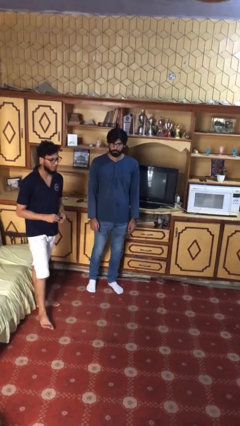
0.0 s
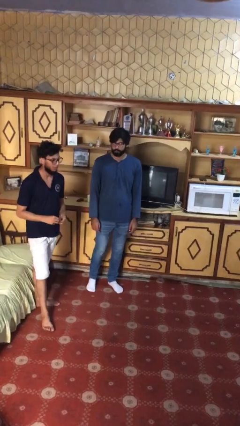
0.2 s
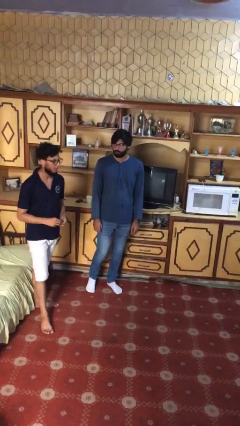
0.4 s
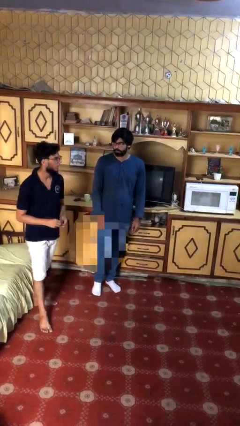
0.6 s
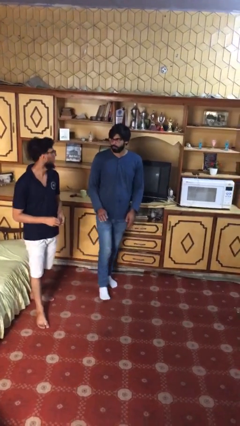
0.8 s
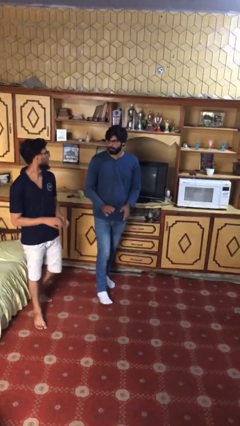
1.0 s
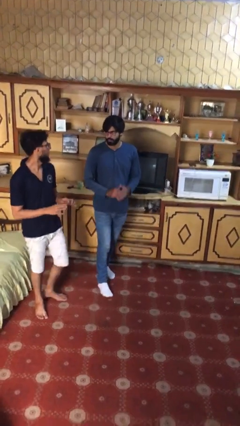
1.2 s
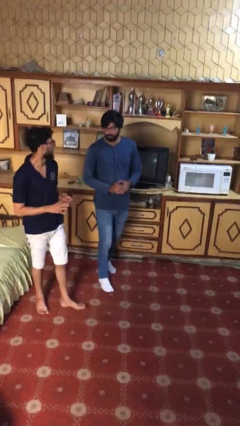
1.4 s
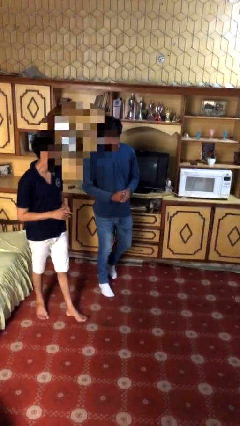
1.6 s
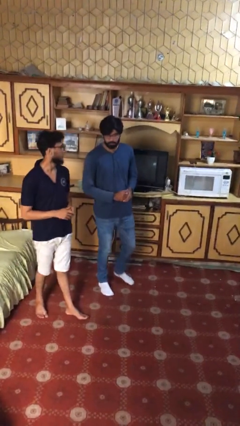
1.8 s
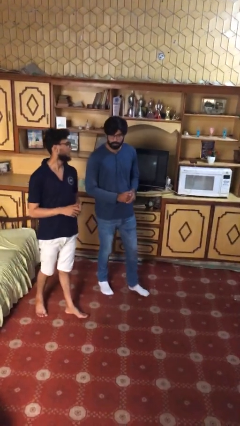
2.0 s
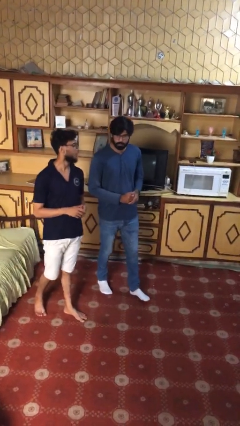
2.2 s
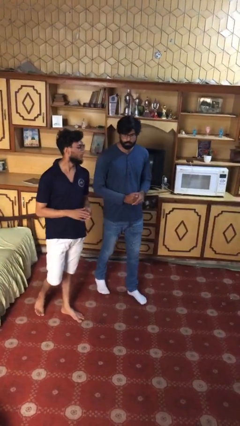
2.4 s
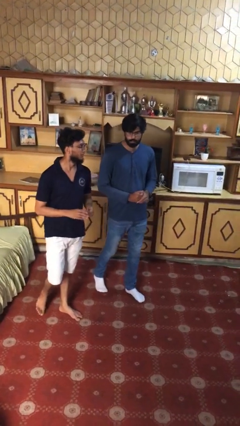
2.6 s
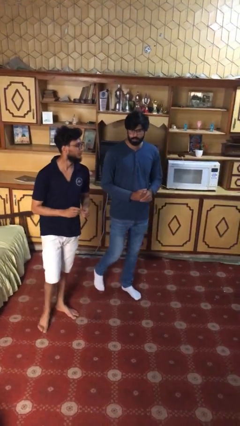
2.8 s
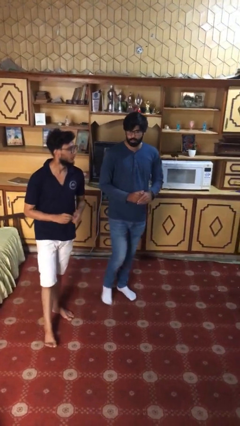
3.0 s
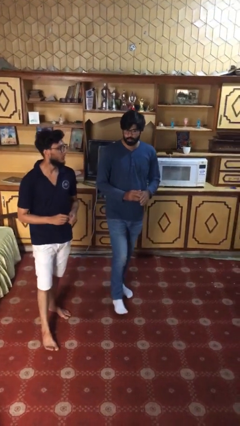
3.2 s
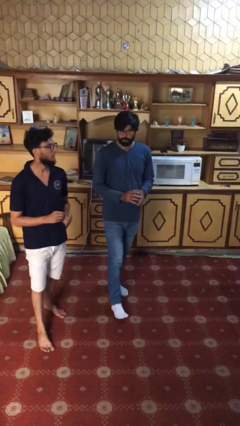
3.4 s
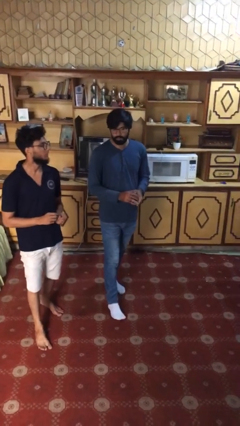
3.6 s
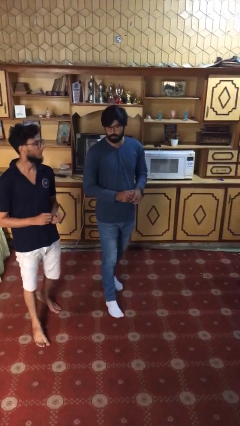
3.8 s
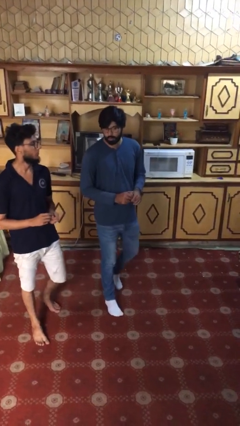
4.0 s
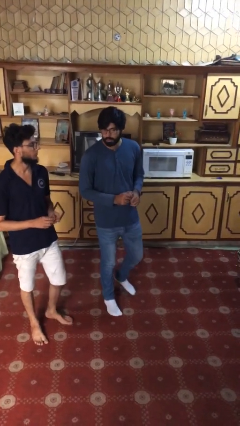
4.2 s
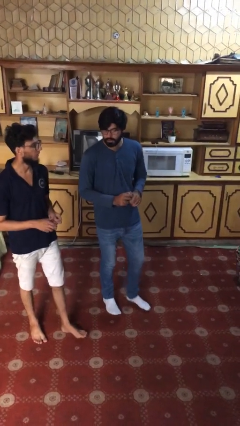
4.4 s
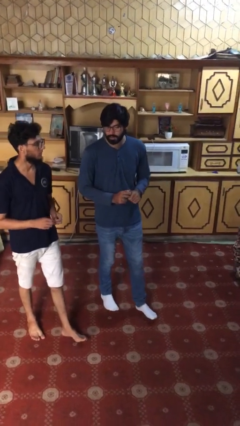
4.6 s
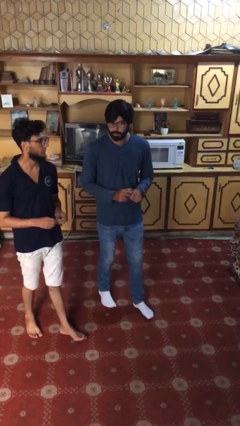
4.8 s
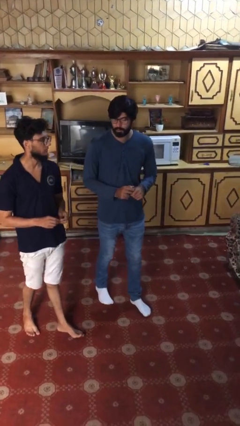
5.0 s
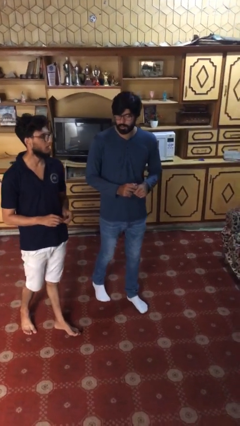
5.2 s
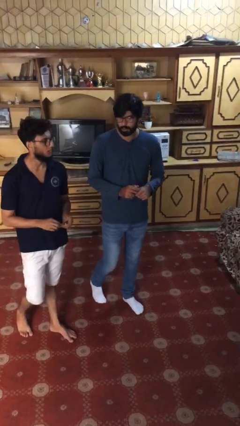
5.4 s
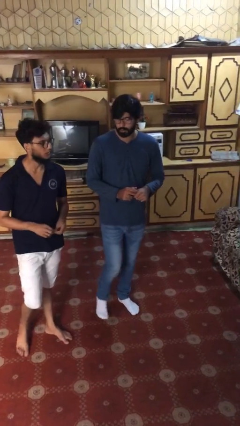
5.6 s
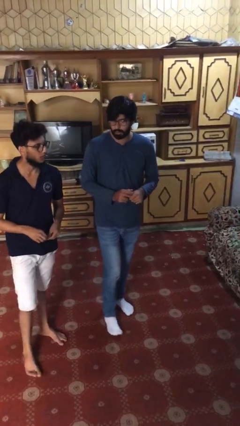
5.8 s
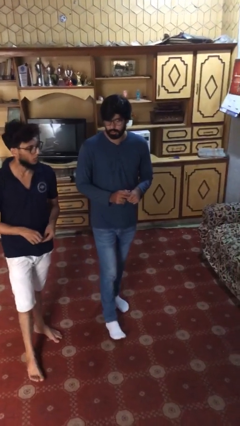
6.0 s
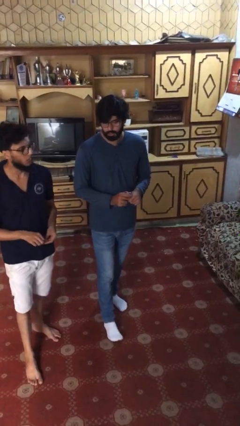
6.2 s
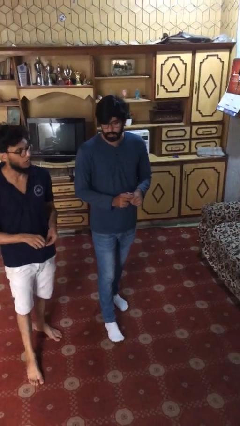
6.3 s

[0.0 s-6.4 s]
person talks to person

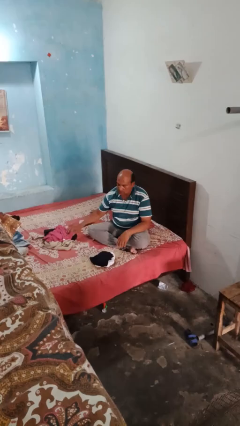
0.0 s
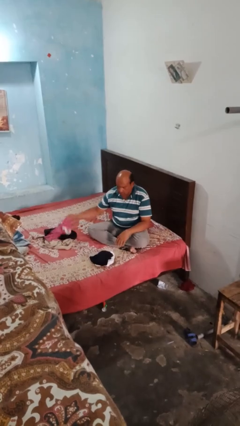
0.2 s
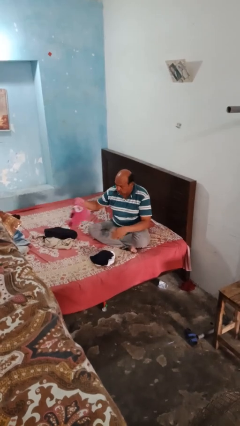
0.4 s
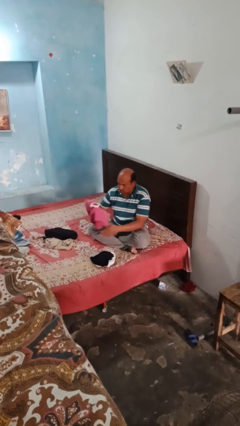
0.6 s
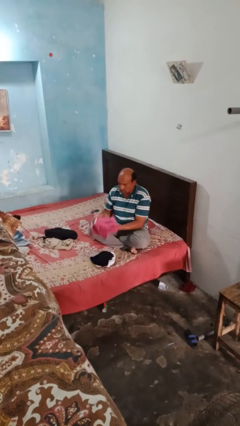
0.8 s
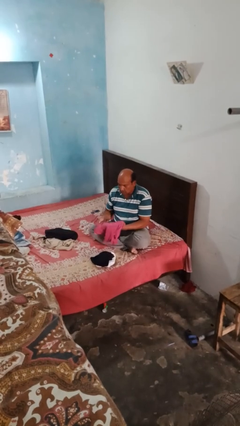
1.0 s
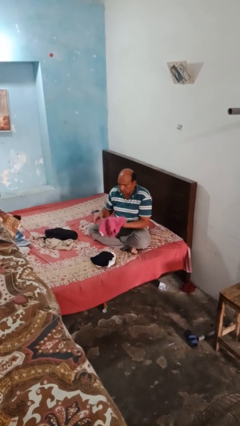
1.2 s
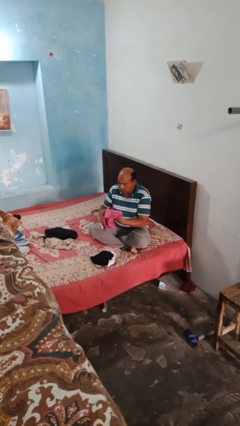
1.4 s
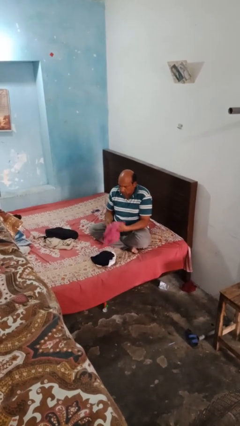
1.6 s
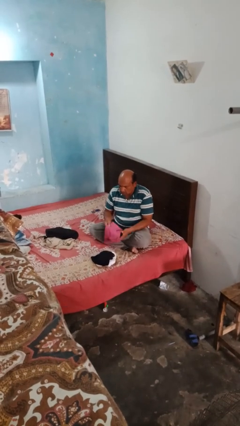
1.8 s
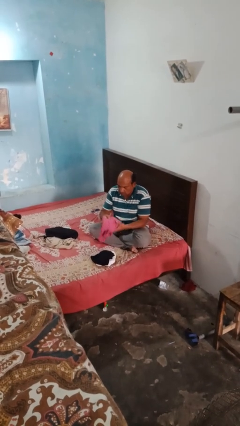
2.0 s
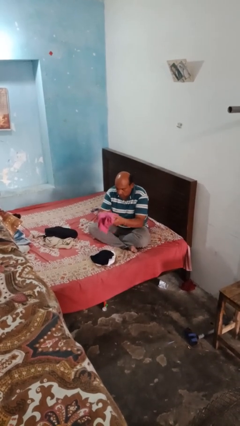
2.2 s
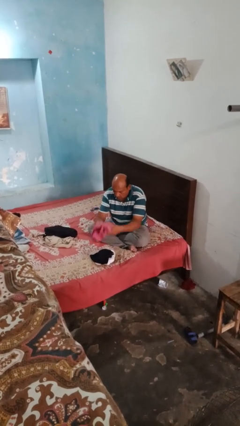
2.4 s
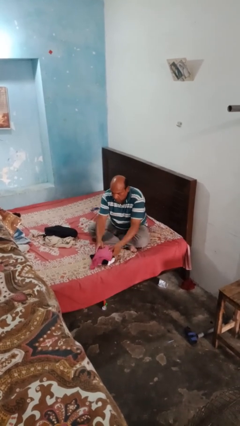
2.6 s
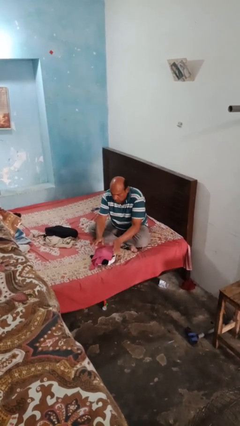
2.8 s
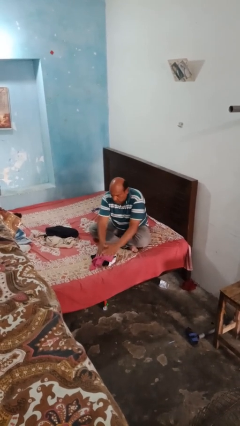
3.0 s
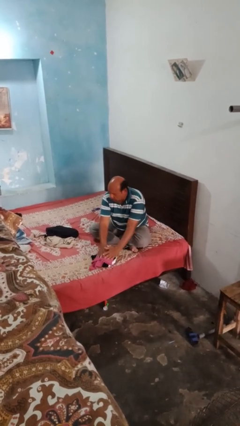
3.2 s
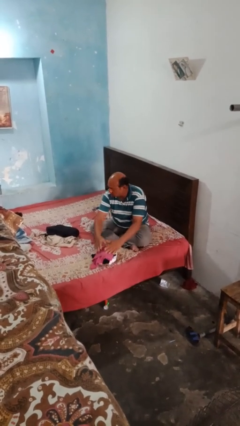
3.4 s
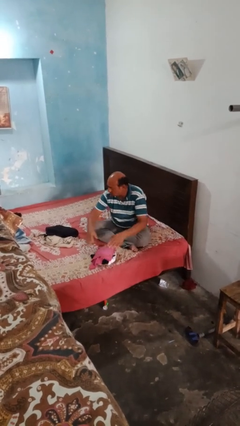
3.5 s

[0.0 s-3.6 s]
person folds shirt

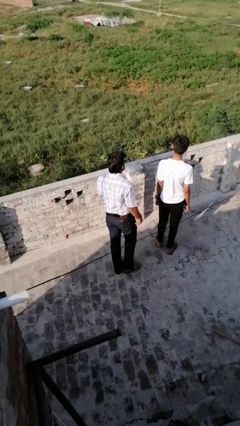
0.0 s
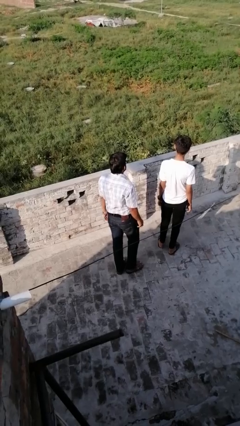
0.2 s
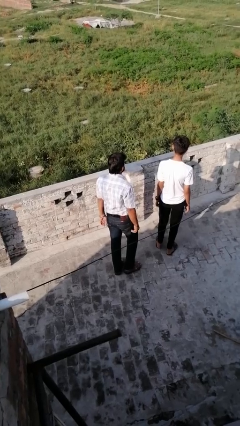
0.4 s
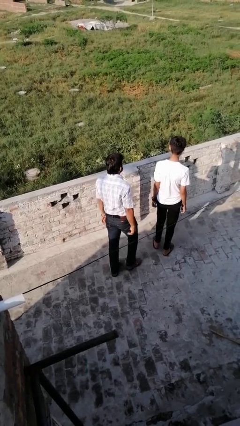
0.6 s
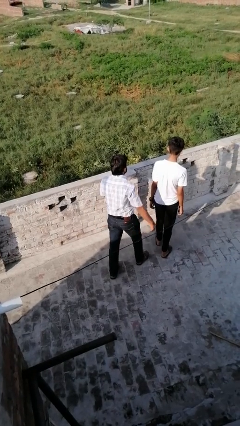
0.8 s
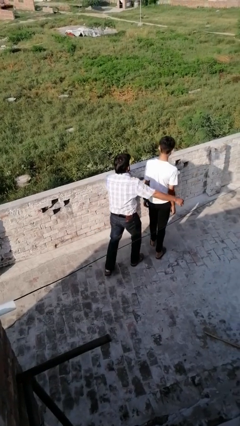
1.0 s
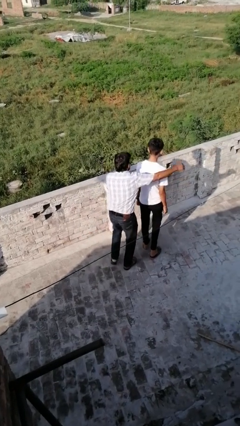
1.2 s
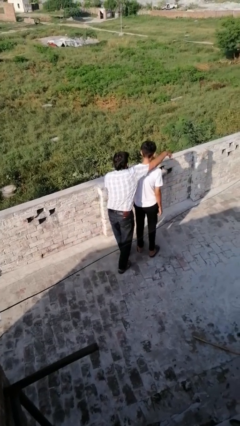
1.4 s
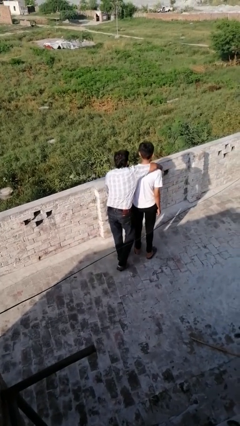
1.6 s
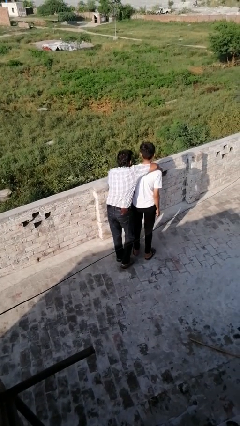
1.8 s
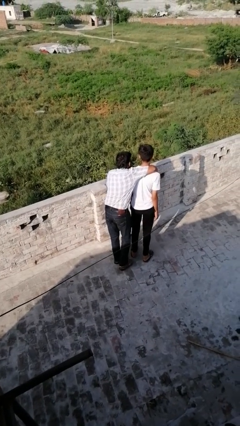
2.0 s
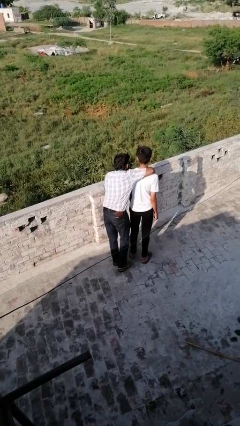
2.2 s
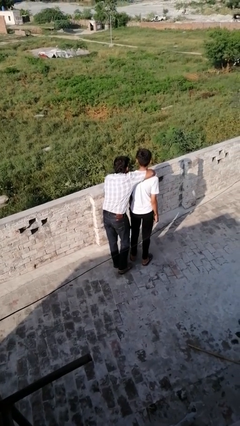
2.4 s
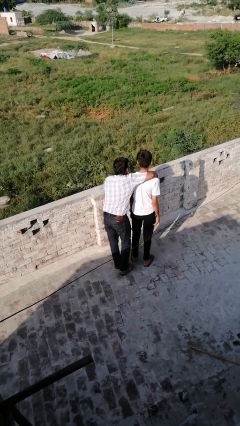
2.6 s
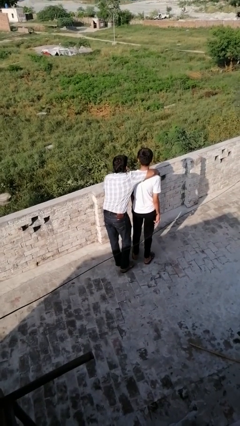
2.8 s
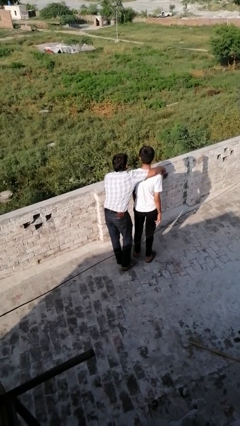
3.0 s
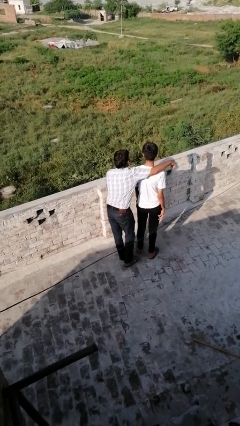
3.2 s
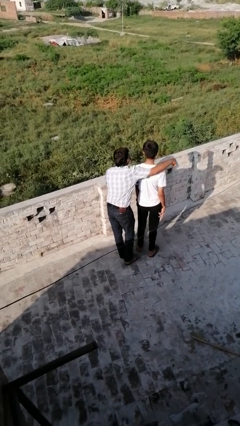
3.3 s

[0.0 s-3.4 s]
person hugs person from behind

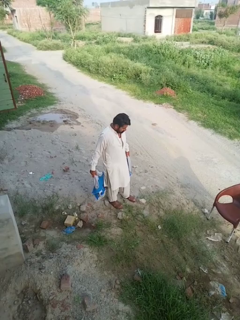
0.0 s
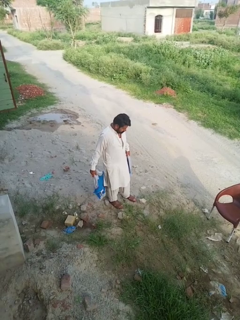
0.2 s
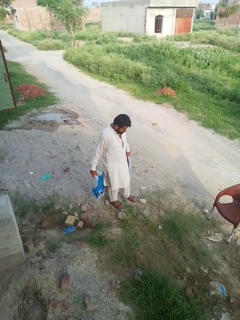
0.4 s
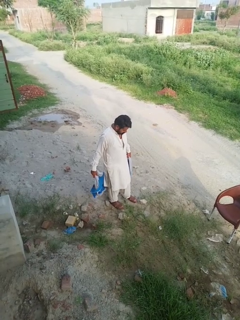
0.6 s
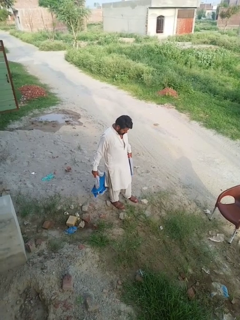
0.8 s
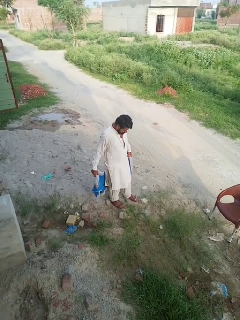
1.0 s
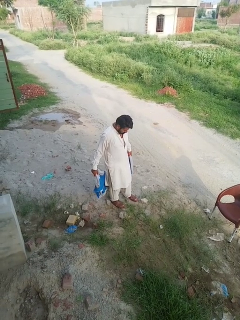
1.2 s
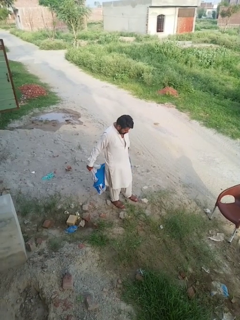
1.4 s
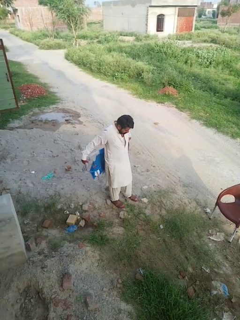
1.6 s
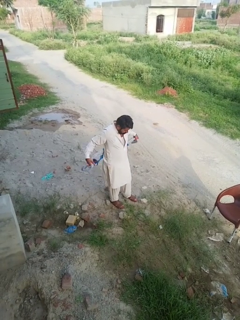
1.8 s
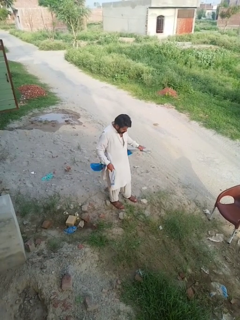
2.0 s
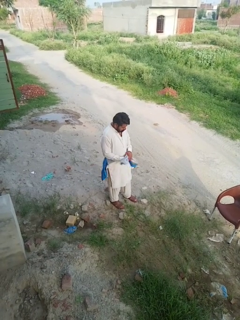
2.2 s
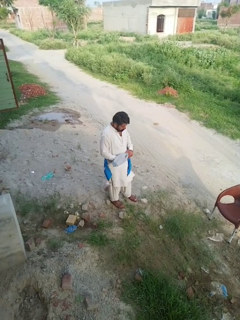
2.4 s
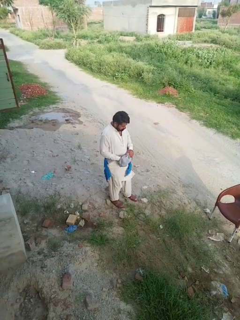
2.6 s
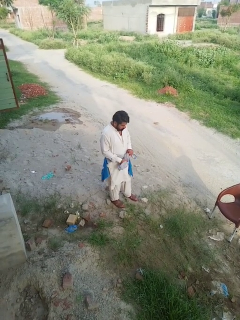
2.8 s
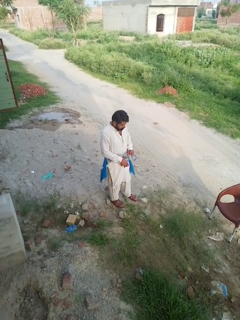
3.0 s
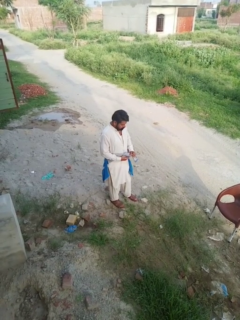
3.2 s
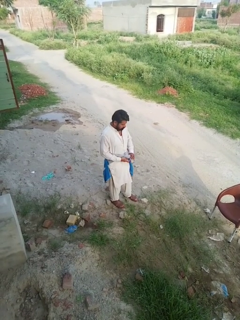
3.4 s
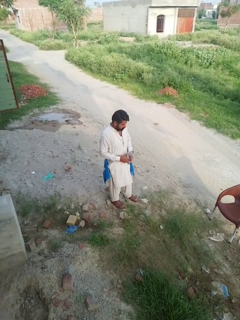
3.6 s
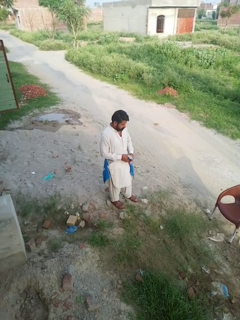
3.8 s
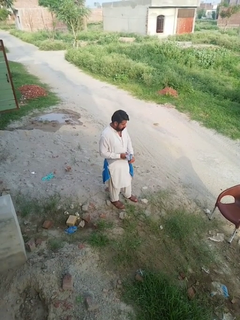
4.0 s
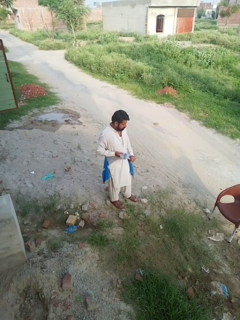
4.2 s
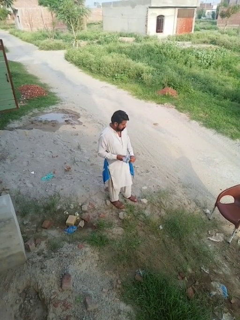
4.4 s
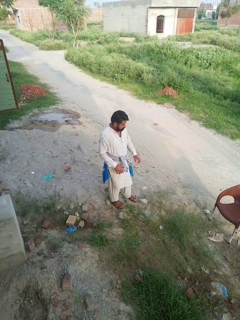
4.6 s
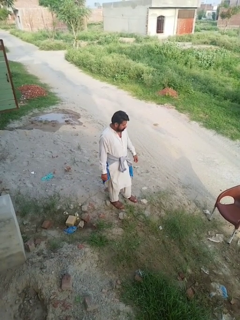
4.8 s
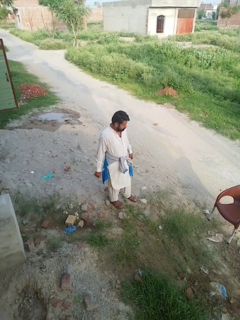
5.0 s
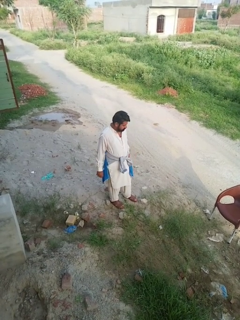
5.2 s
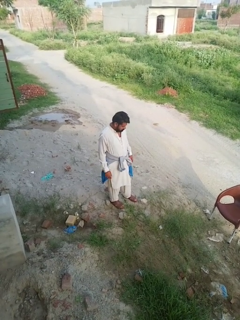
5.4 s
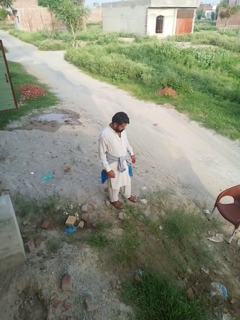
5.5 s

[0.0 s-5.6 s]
person ties jacket around waist

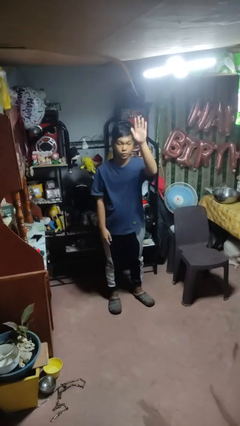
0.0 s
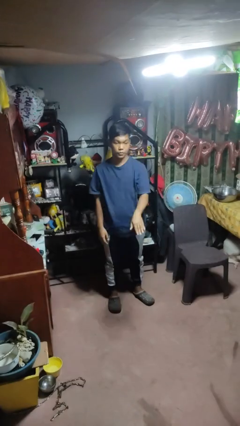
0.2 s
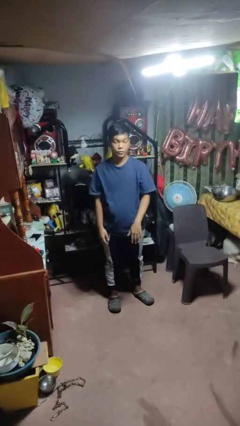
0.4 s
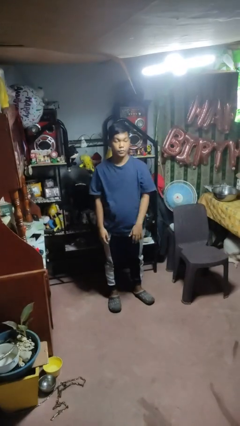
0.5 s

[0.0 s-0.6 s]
person gestures swipe down
